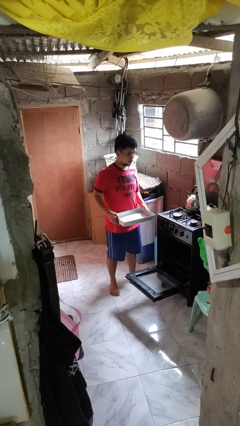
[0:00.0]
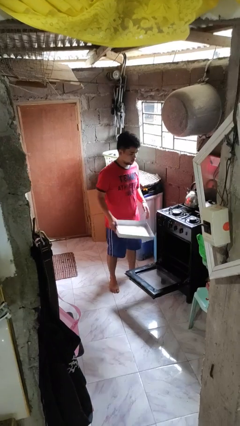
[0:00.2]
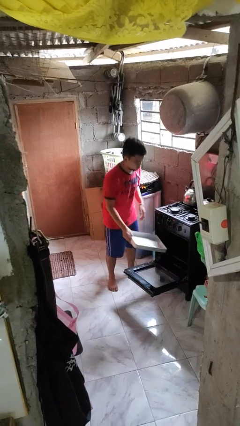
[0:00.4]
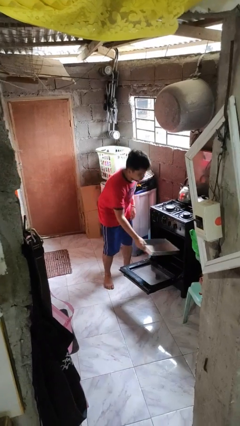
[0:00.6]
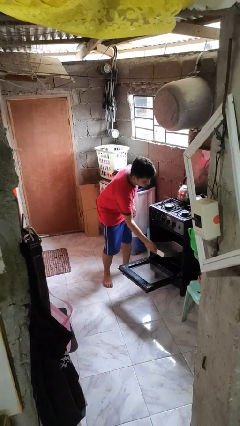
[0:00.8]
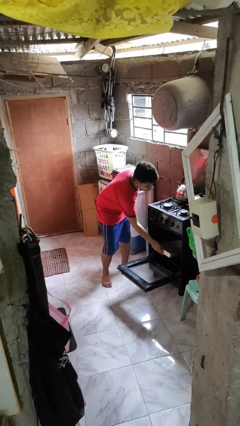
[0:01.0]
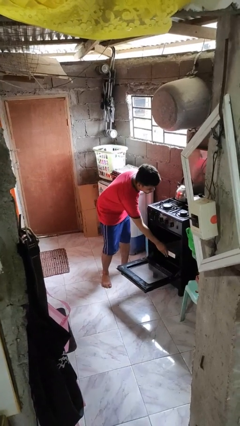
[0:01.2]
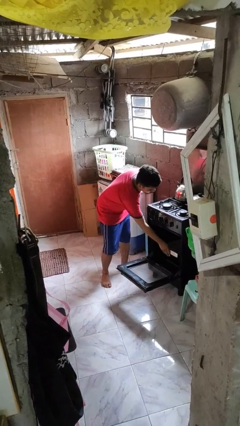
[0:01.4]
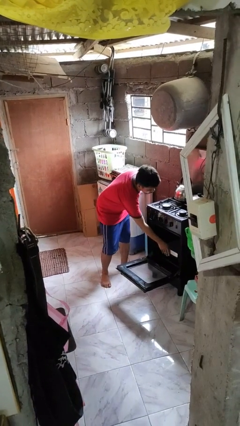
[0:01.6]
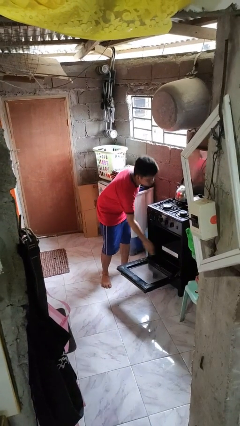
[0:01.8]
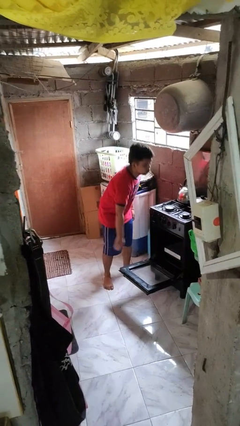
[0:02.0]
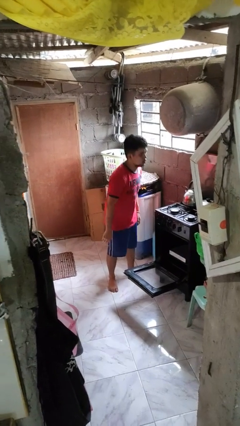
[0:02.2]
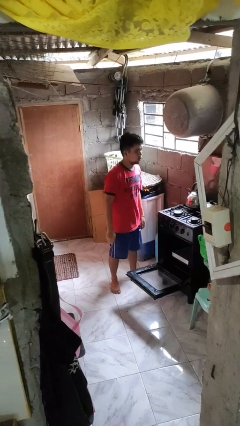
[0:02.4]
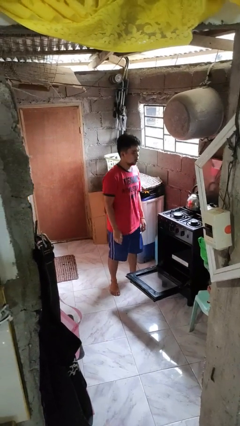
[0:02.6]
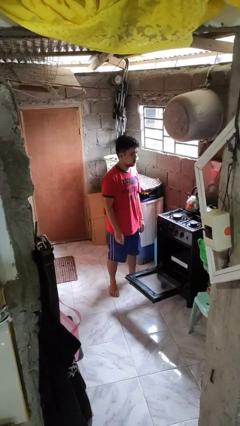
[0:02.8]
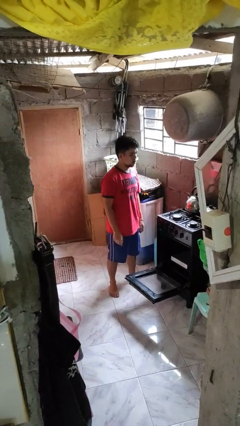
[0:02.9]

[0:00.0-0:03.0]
person puts object into oven

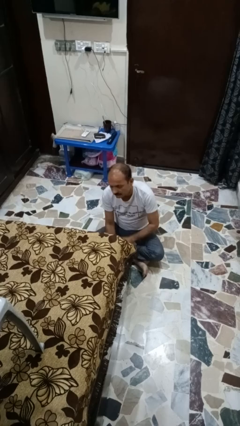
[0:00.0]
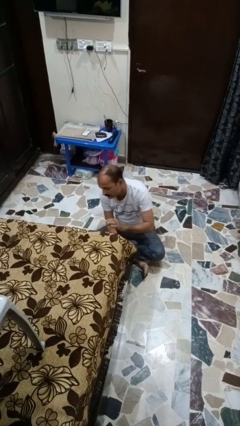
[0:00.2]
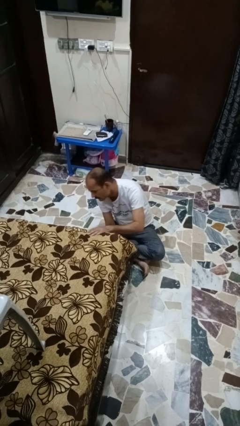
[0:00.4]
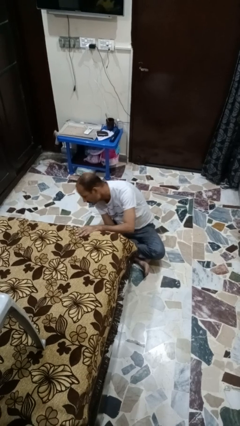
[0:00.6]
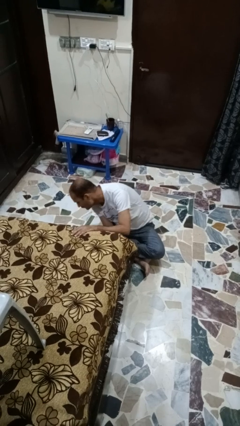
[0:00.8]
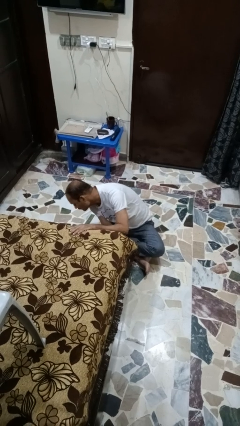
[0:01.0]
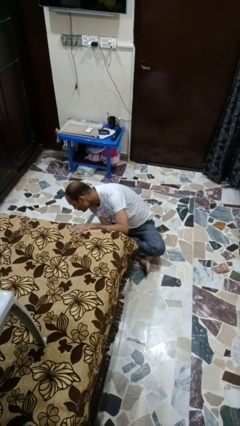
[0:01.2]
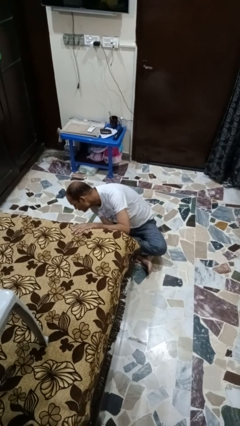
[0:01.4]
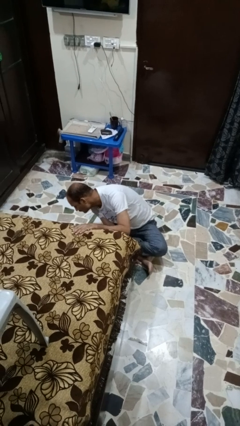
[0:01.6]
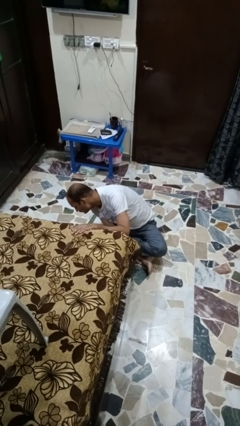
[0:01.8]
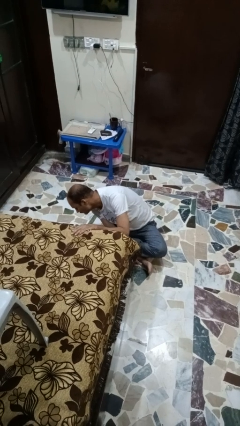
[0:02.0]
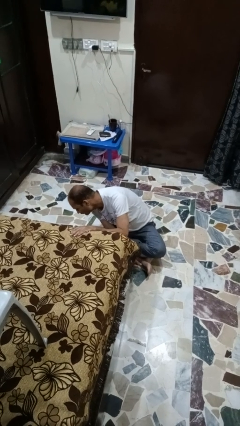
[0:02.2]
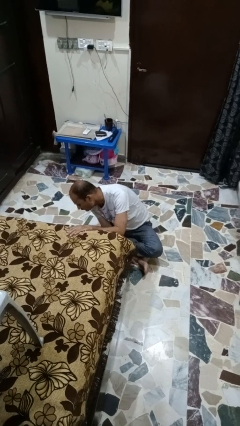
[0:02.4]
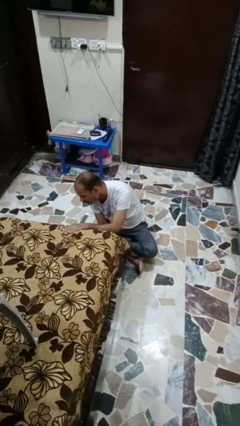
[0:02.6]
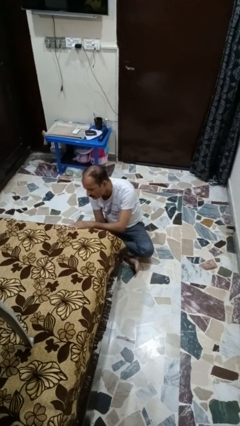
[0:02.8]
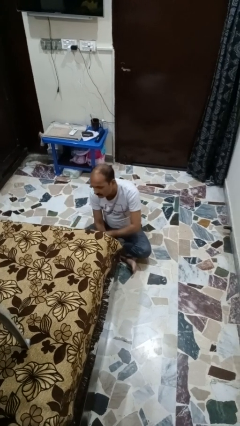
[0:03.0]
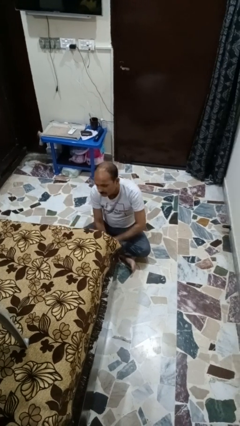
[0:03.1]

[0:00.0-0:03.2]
person searches under bed

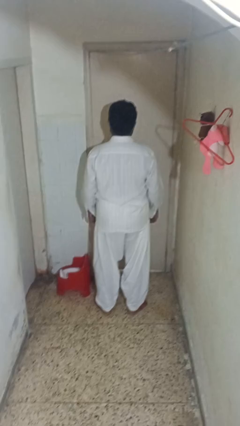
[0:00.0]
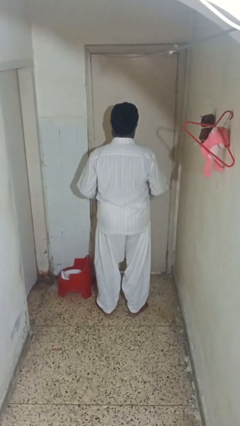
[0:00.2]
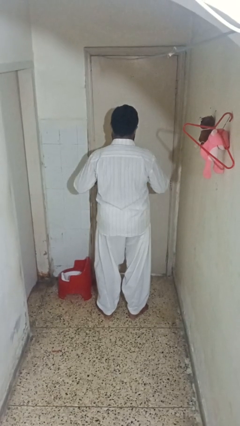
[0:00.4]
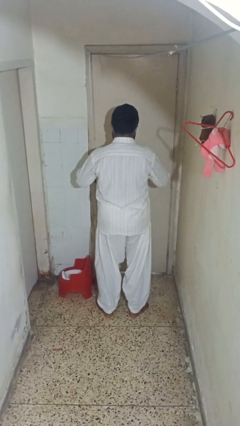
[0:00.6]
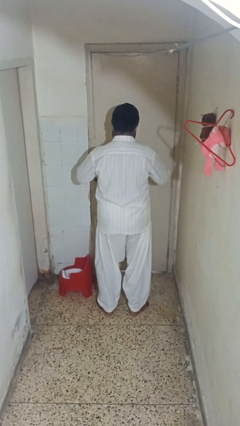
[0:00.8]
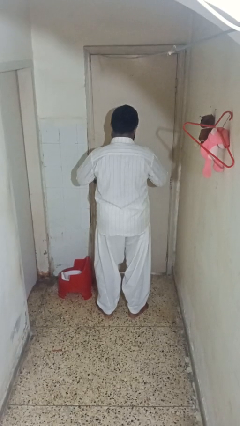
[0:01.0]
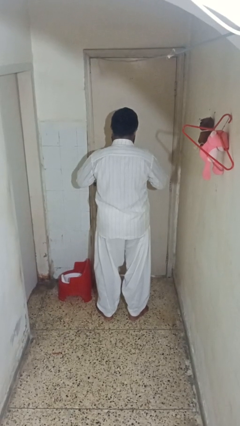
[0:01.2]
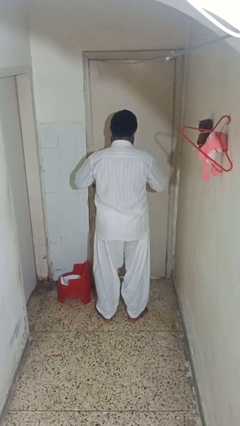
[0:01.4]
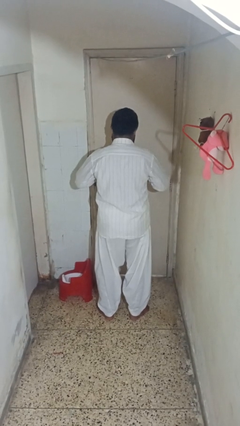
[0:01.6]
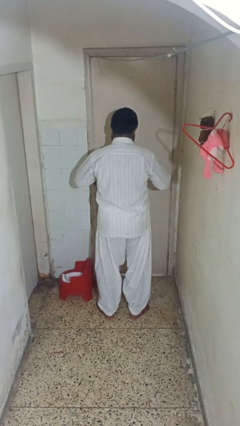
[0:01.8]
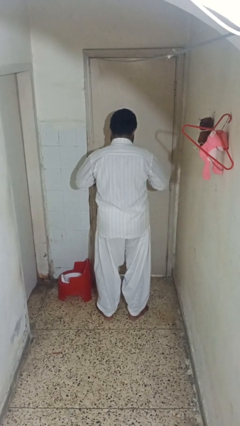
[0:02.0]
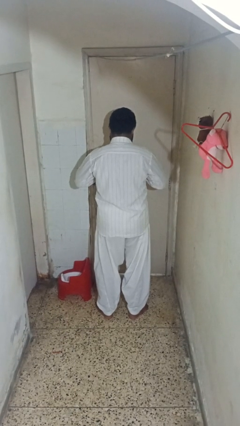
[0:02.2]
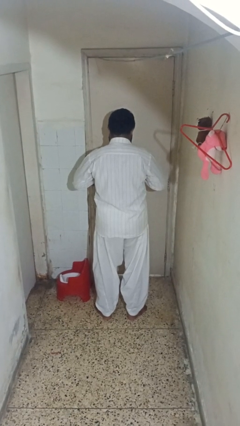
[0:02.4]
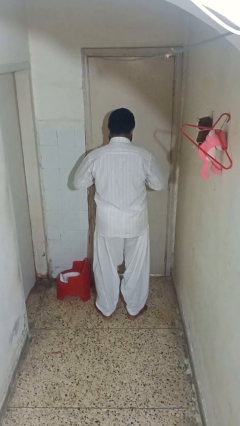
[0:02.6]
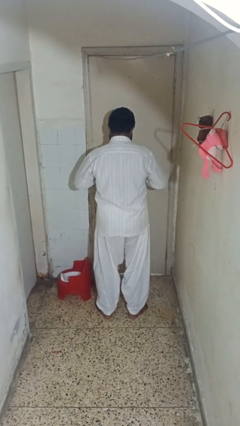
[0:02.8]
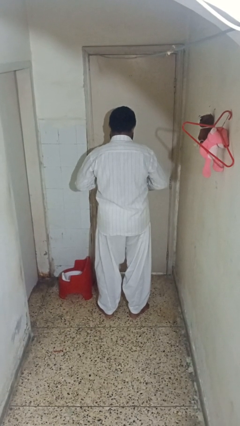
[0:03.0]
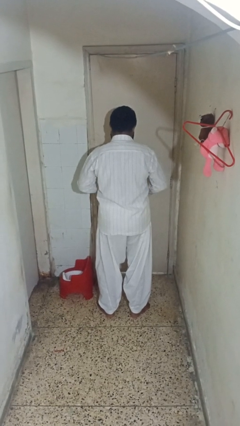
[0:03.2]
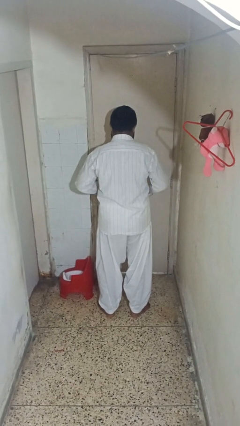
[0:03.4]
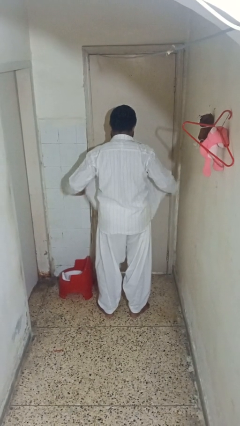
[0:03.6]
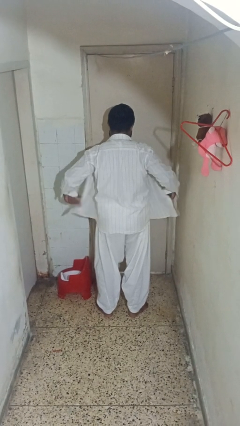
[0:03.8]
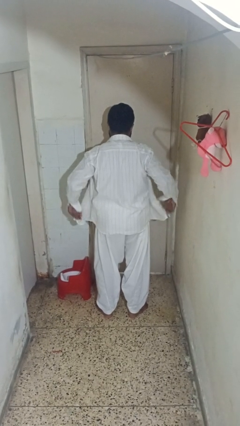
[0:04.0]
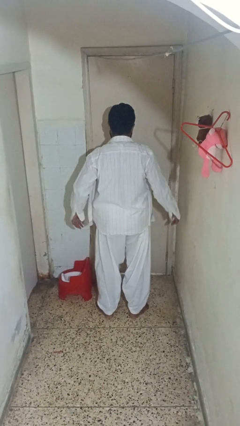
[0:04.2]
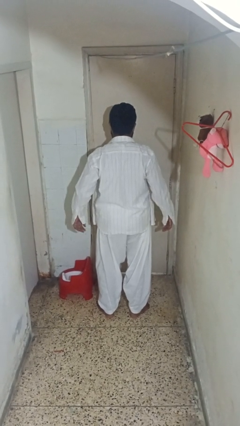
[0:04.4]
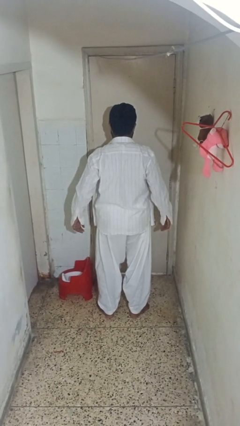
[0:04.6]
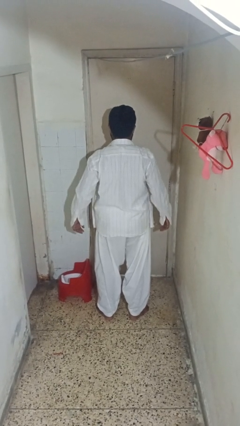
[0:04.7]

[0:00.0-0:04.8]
person unbuttons shirt

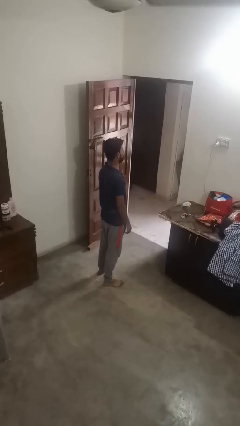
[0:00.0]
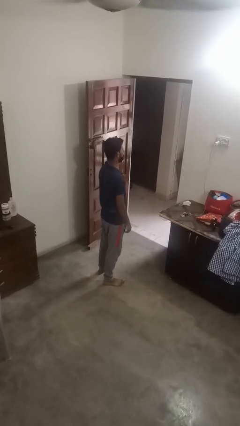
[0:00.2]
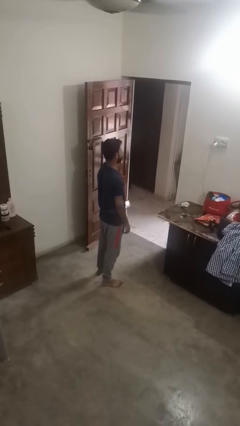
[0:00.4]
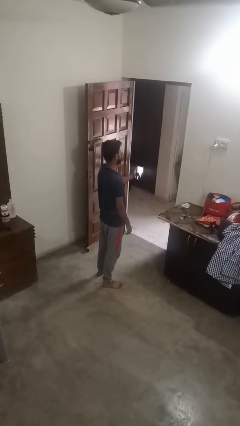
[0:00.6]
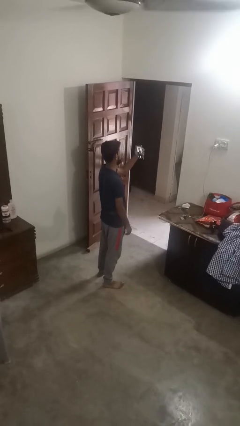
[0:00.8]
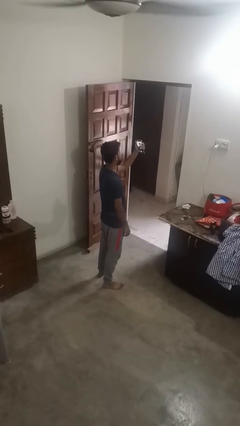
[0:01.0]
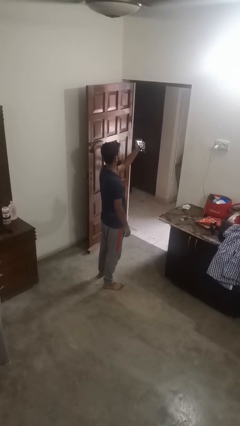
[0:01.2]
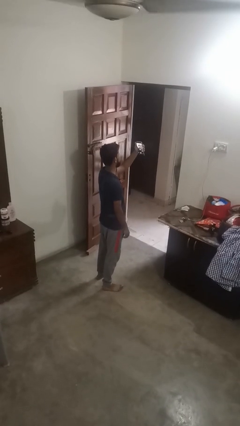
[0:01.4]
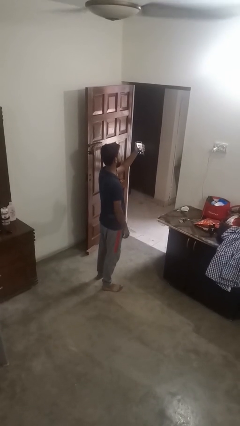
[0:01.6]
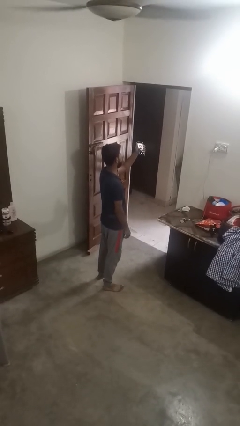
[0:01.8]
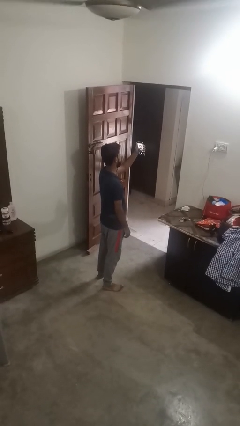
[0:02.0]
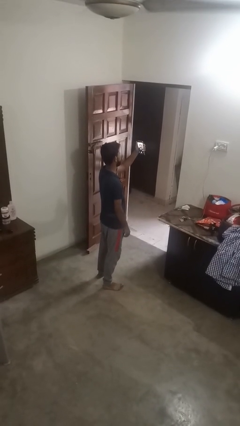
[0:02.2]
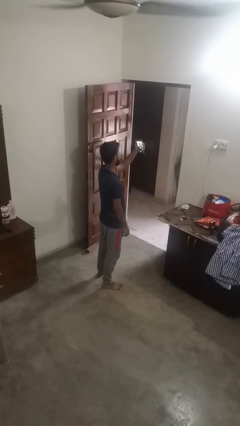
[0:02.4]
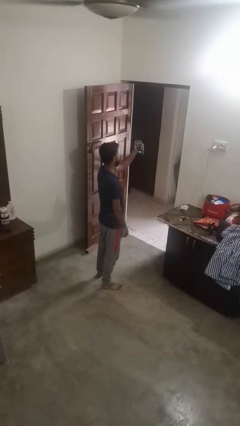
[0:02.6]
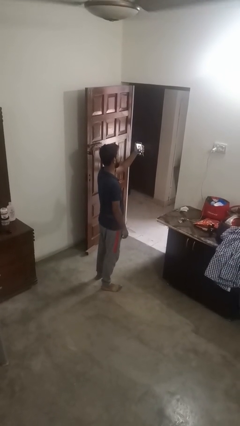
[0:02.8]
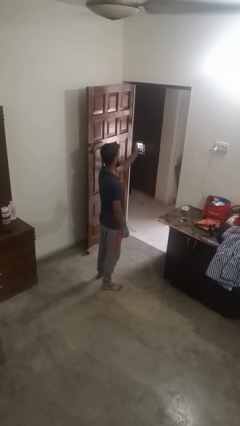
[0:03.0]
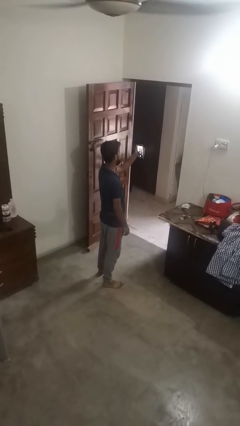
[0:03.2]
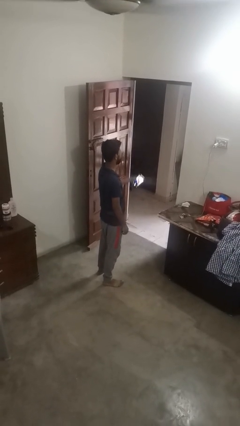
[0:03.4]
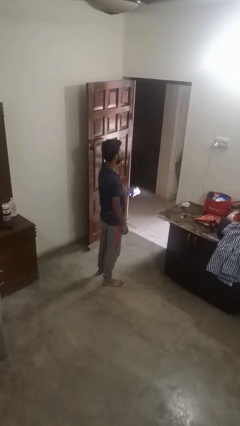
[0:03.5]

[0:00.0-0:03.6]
person takes selfie

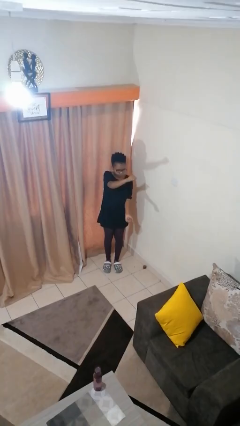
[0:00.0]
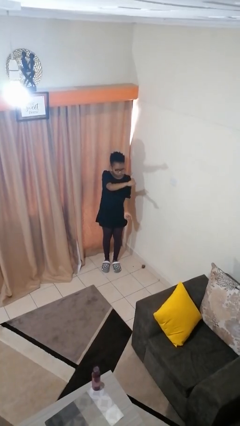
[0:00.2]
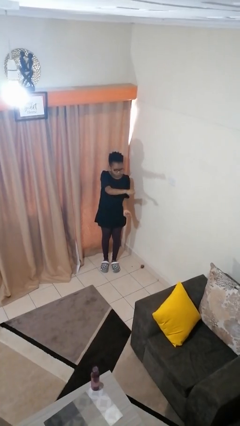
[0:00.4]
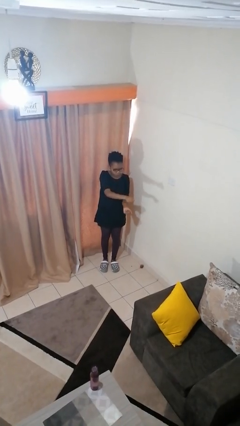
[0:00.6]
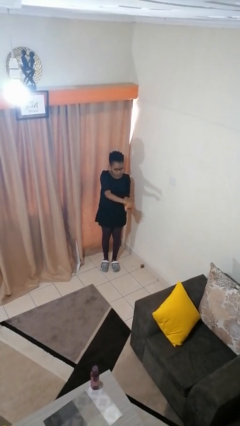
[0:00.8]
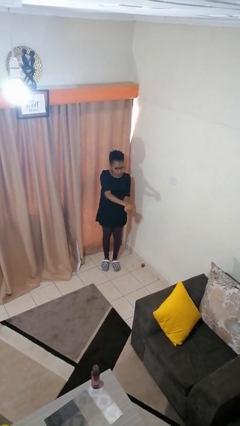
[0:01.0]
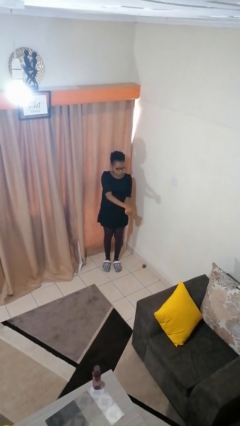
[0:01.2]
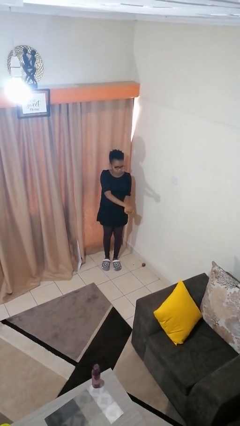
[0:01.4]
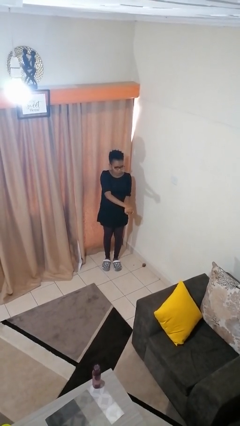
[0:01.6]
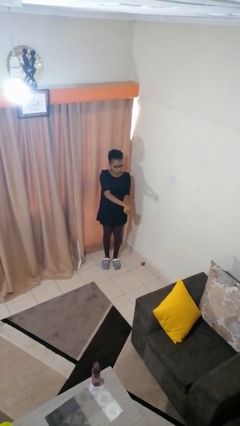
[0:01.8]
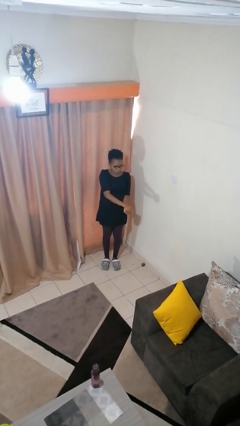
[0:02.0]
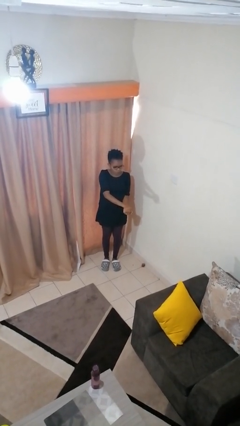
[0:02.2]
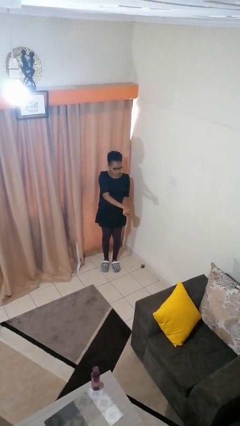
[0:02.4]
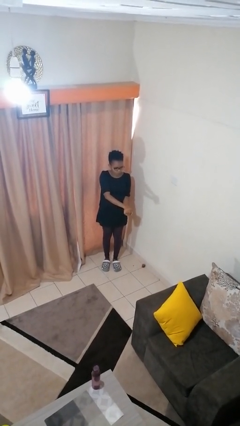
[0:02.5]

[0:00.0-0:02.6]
person gestures zoom out

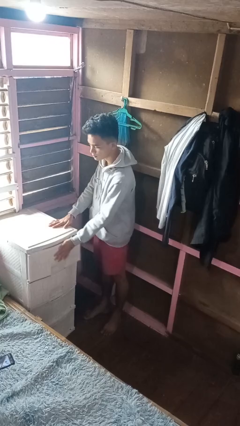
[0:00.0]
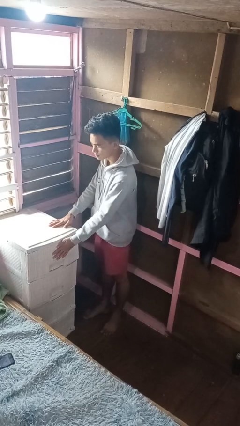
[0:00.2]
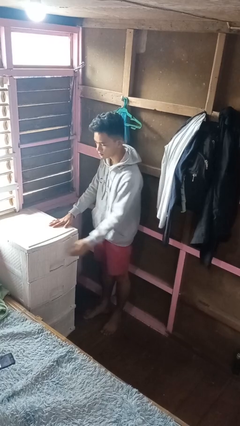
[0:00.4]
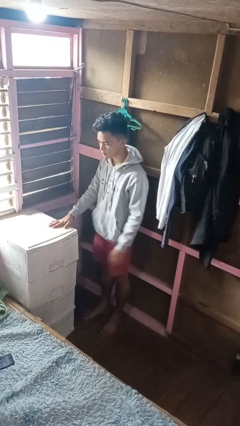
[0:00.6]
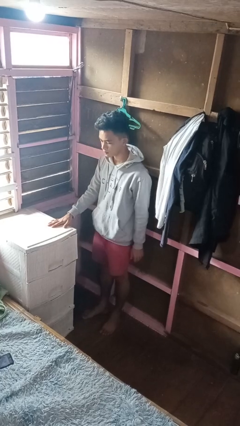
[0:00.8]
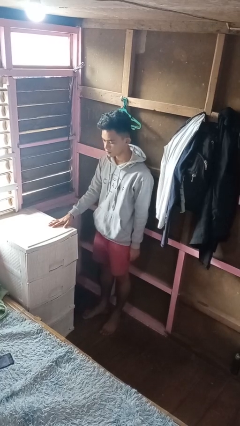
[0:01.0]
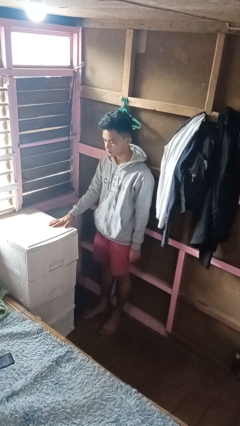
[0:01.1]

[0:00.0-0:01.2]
person closes dresser drawer
